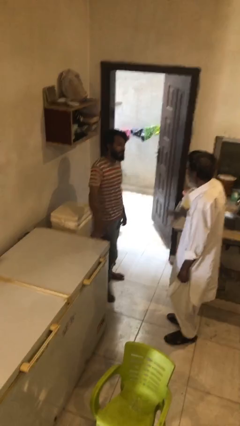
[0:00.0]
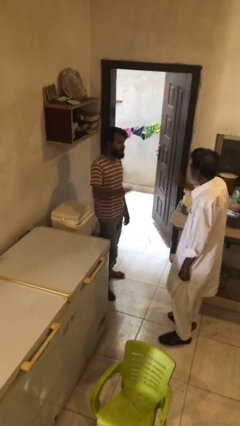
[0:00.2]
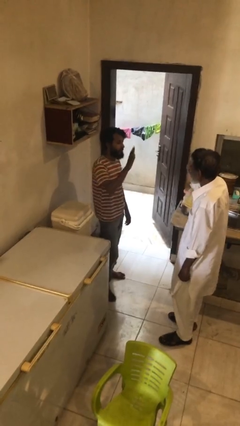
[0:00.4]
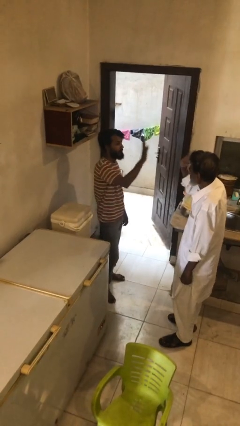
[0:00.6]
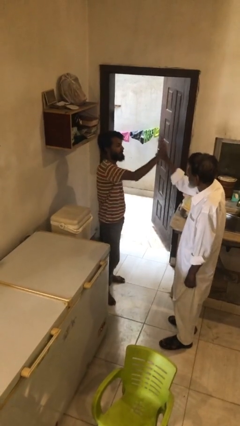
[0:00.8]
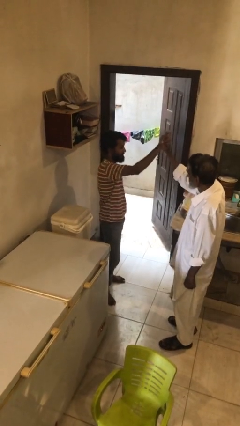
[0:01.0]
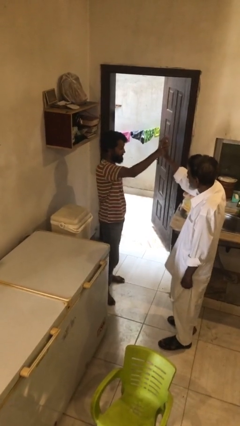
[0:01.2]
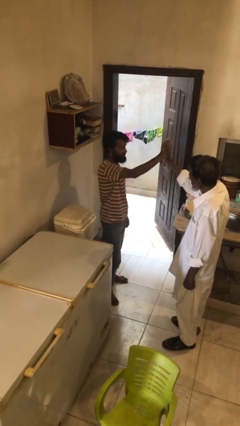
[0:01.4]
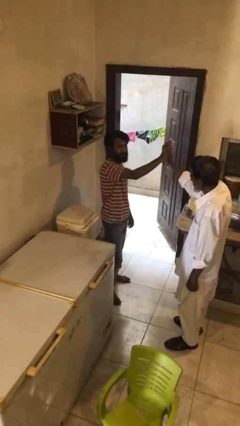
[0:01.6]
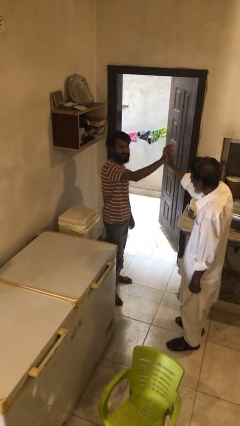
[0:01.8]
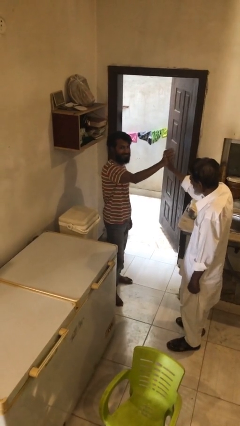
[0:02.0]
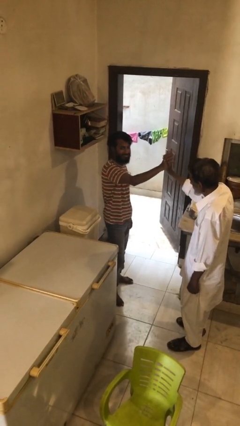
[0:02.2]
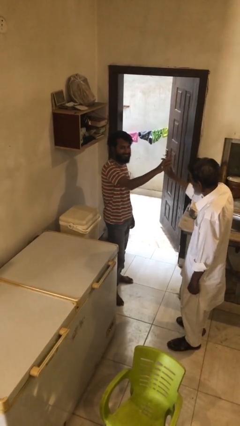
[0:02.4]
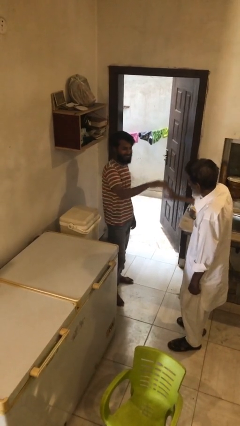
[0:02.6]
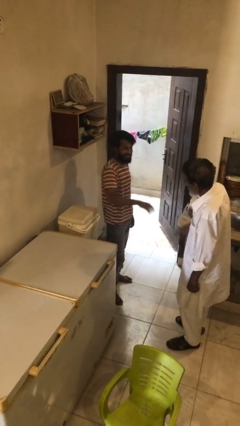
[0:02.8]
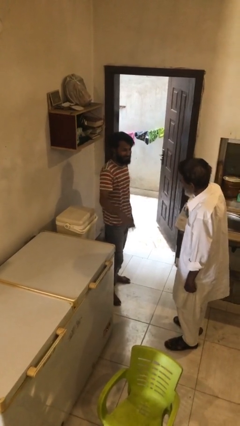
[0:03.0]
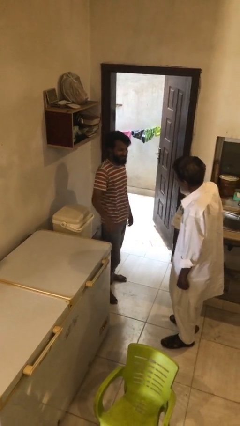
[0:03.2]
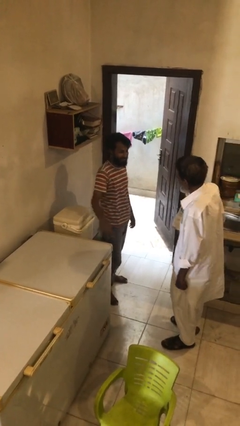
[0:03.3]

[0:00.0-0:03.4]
person highfives hand

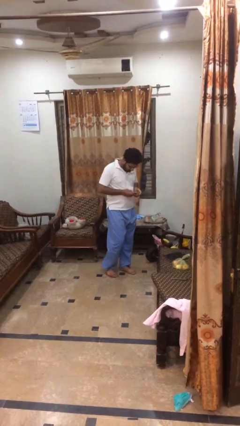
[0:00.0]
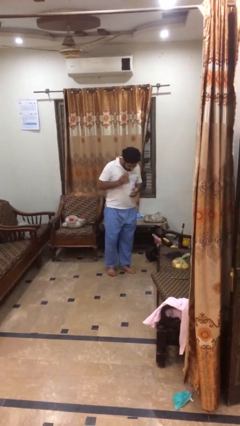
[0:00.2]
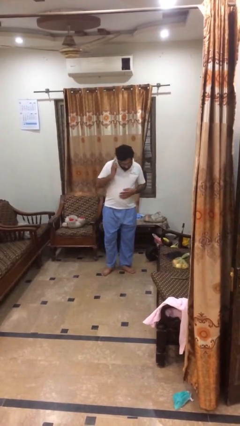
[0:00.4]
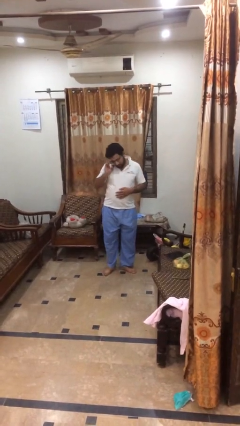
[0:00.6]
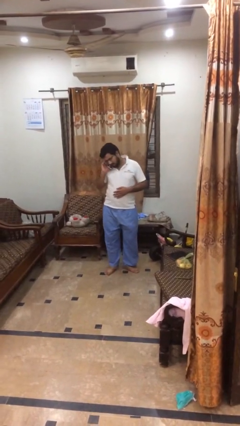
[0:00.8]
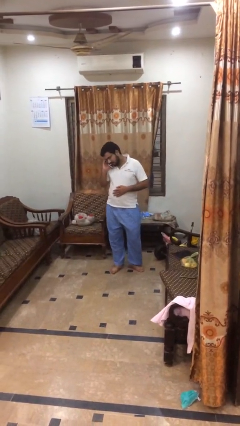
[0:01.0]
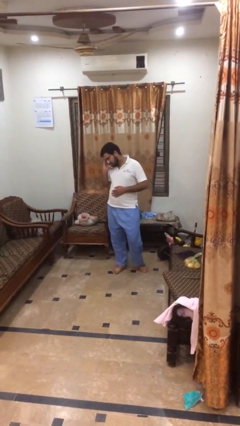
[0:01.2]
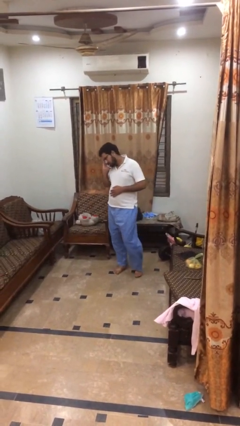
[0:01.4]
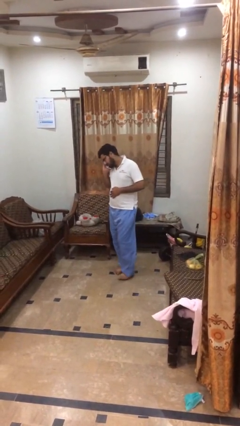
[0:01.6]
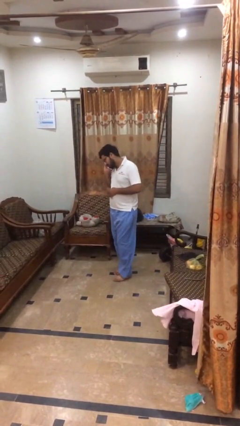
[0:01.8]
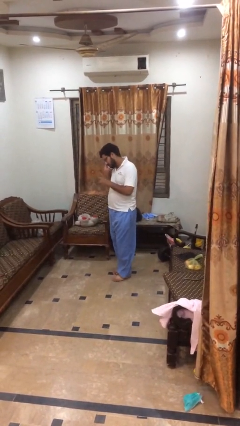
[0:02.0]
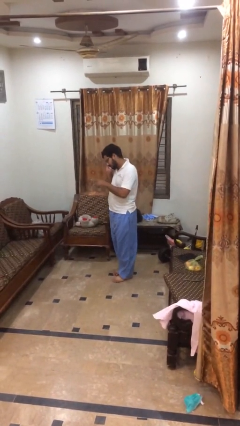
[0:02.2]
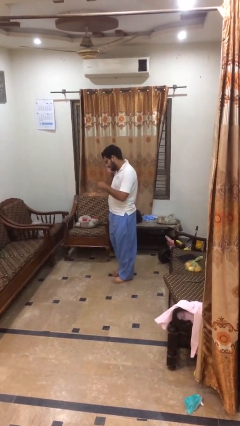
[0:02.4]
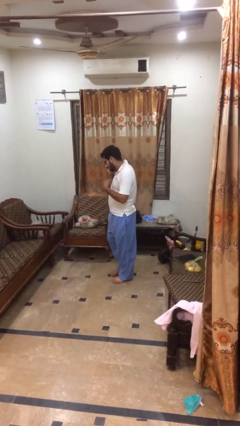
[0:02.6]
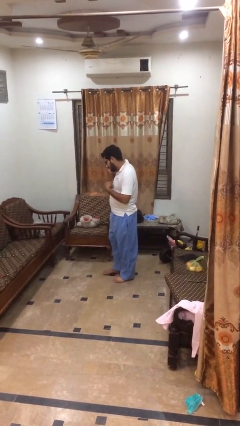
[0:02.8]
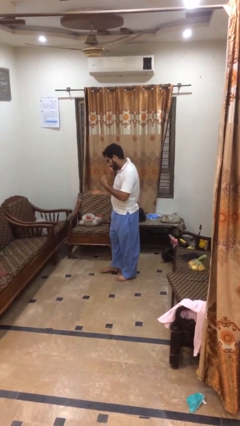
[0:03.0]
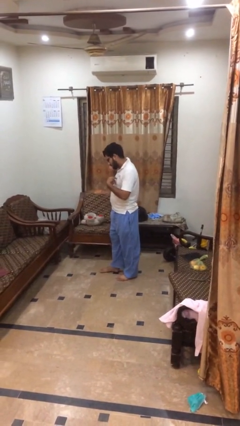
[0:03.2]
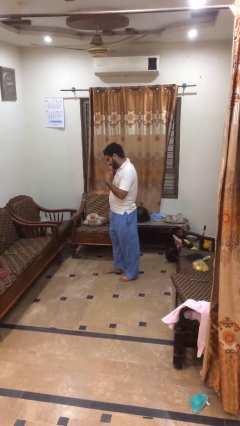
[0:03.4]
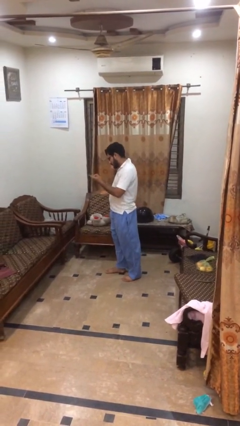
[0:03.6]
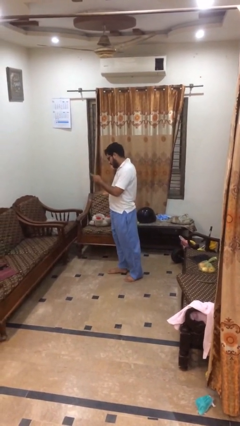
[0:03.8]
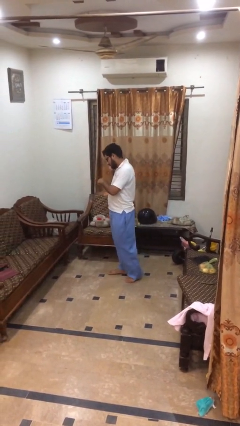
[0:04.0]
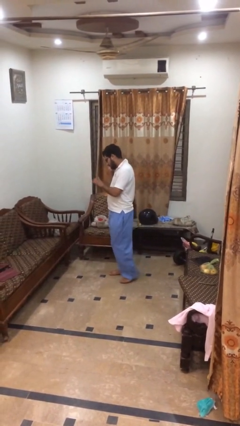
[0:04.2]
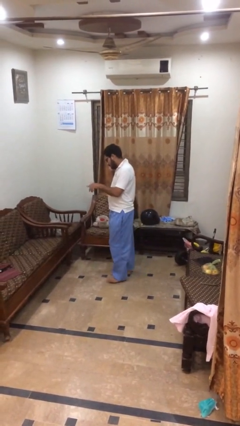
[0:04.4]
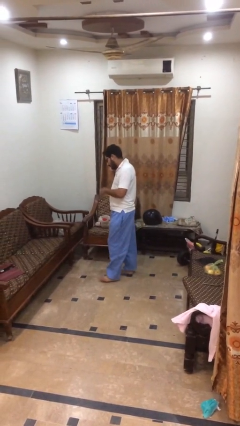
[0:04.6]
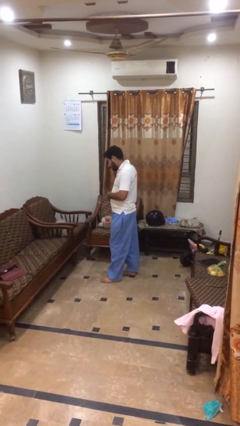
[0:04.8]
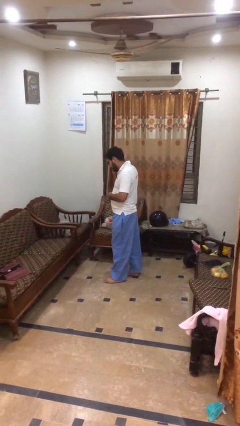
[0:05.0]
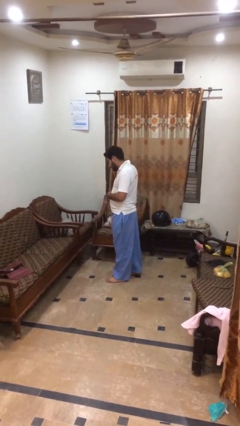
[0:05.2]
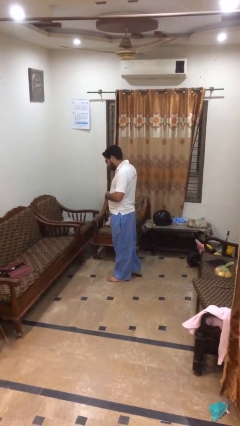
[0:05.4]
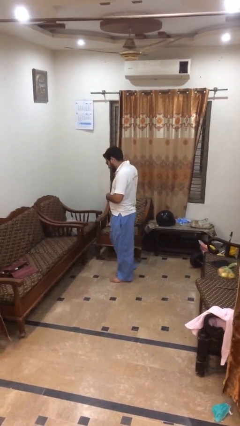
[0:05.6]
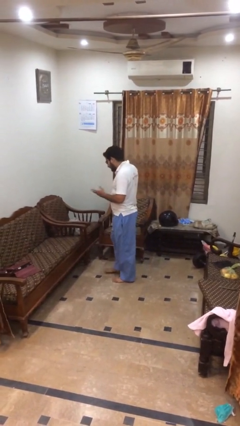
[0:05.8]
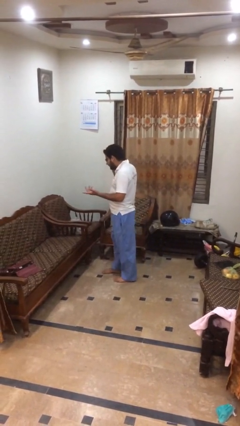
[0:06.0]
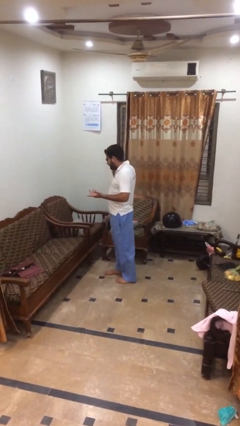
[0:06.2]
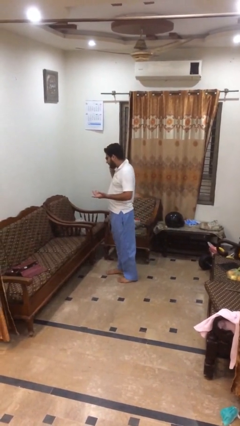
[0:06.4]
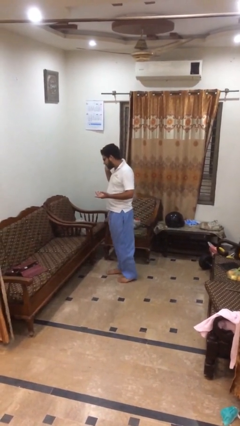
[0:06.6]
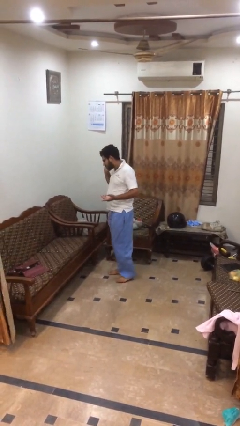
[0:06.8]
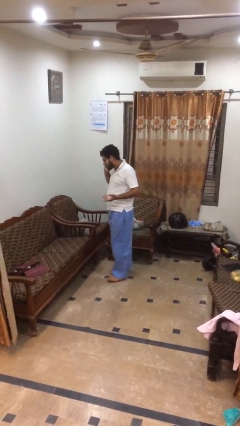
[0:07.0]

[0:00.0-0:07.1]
person talks on phone

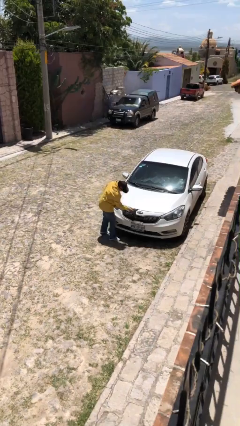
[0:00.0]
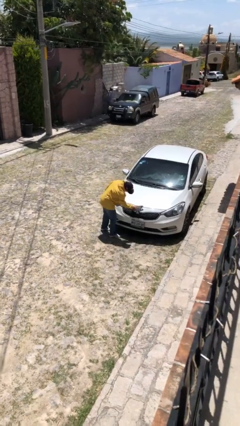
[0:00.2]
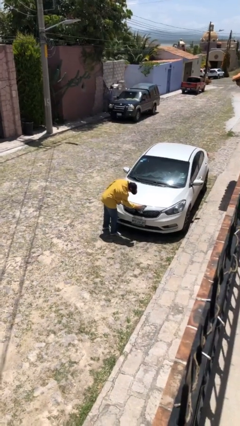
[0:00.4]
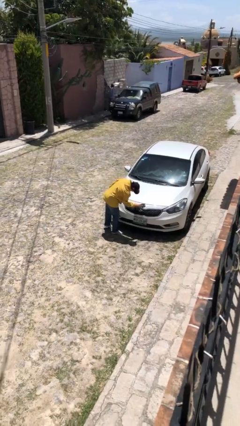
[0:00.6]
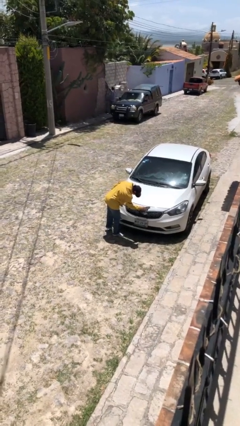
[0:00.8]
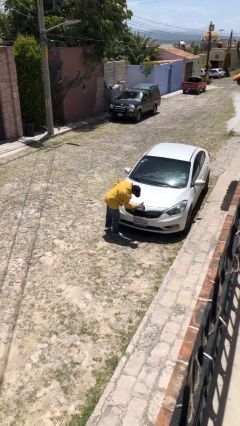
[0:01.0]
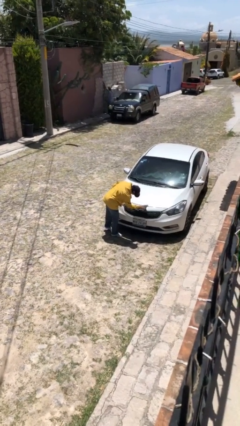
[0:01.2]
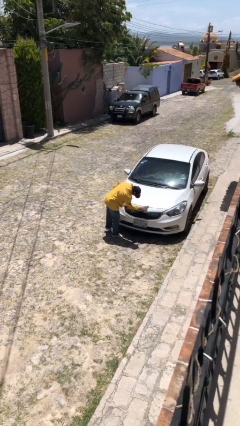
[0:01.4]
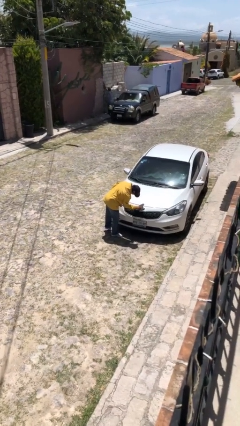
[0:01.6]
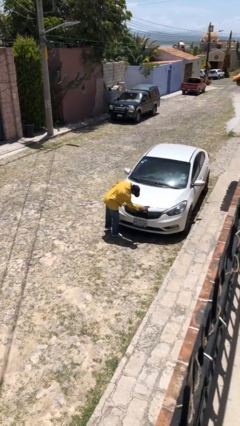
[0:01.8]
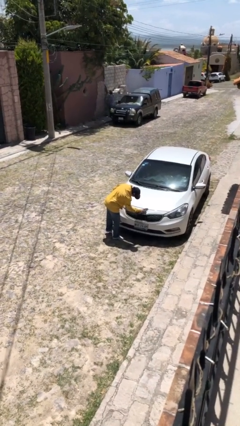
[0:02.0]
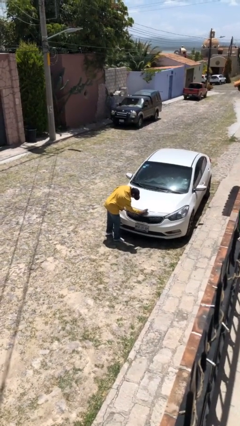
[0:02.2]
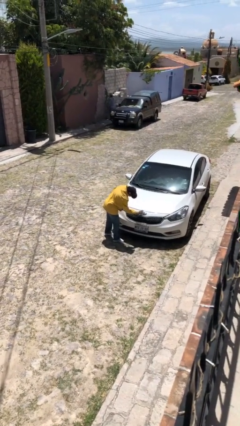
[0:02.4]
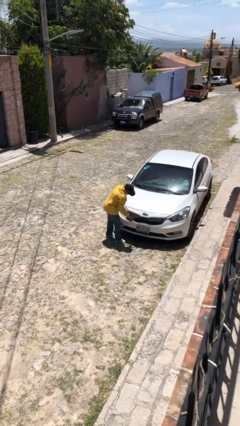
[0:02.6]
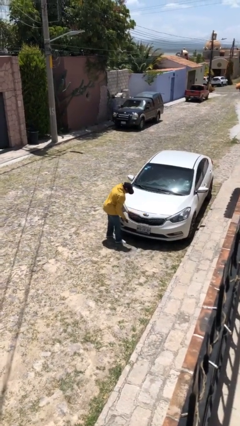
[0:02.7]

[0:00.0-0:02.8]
person polishes car with rag

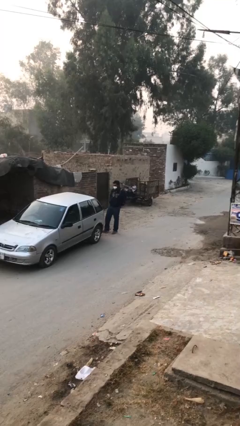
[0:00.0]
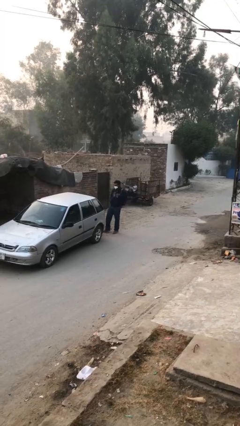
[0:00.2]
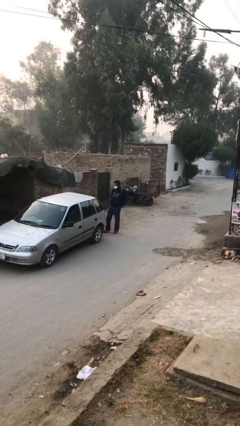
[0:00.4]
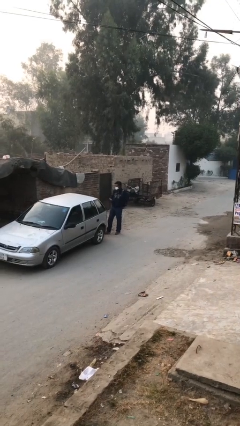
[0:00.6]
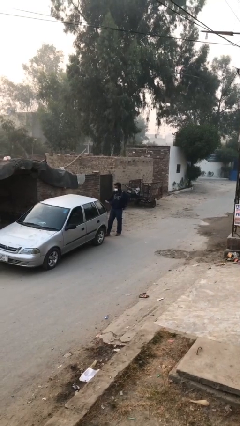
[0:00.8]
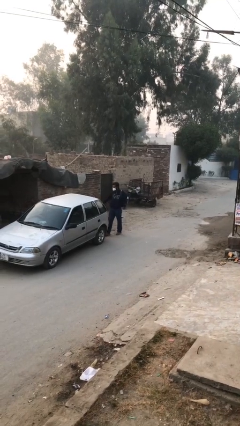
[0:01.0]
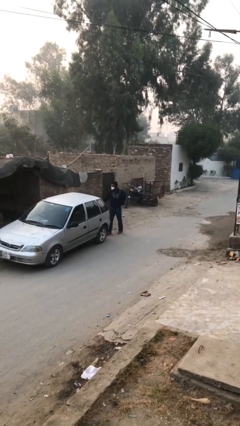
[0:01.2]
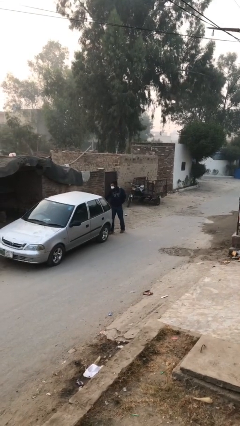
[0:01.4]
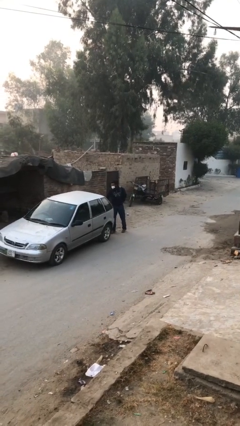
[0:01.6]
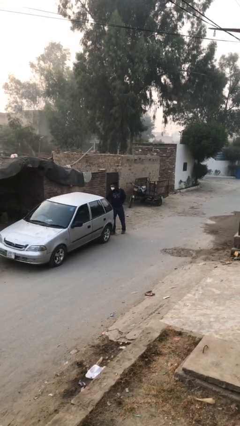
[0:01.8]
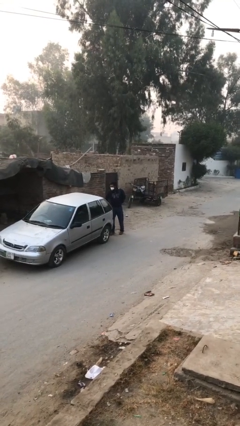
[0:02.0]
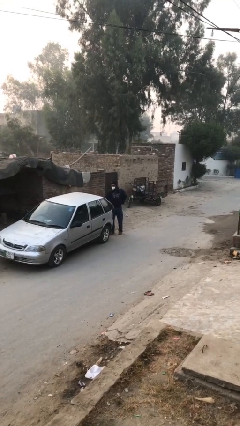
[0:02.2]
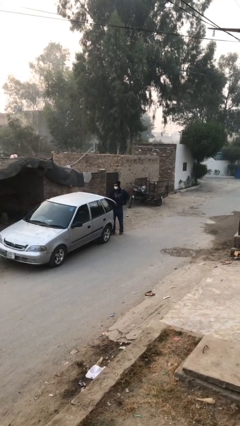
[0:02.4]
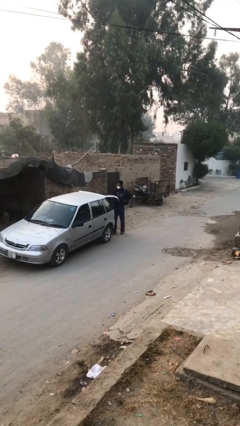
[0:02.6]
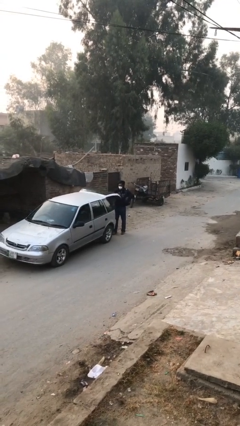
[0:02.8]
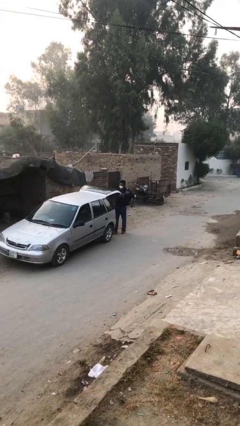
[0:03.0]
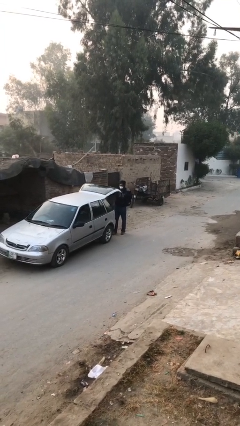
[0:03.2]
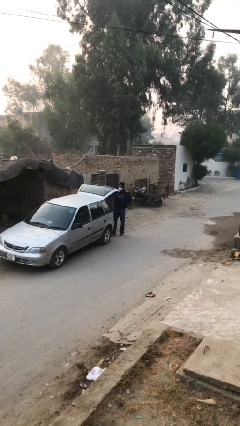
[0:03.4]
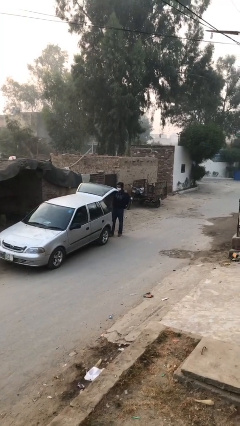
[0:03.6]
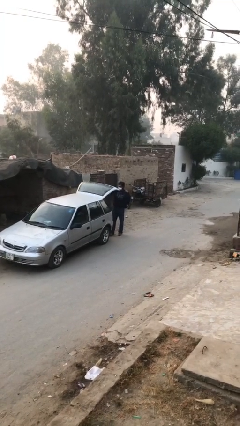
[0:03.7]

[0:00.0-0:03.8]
person opens car trunk

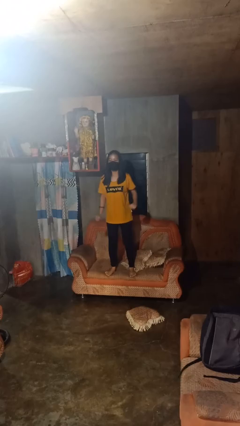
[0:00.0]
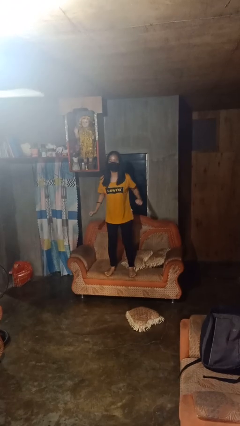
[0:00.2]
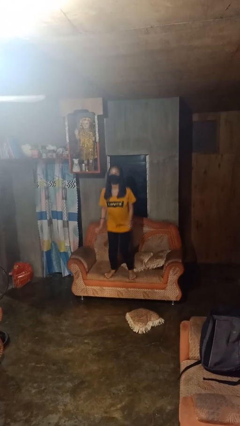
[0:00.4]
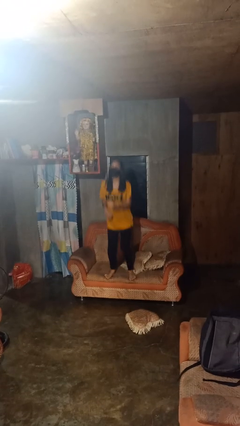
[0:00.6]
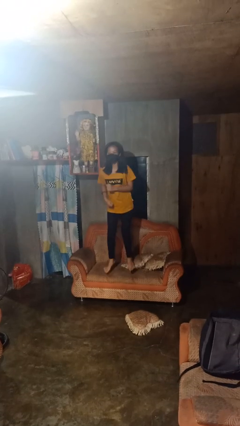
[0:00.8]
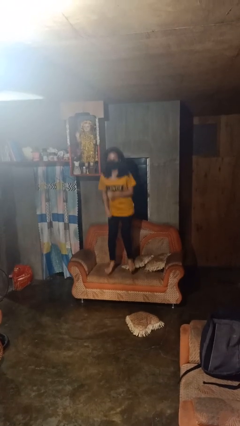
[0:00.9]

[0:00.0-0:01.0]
person jumps on couch
